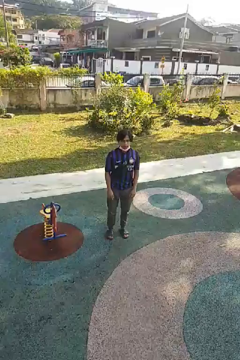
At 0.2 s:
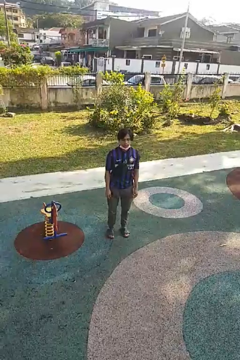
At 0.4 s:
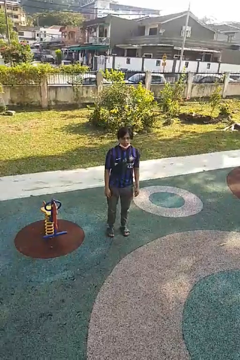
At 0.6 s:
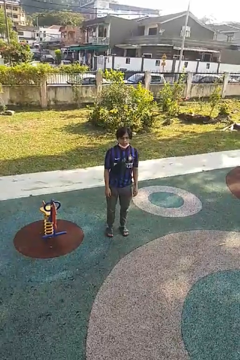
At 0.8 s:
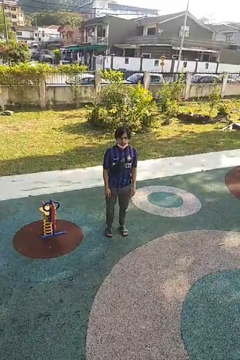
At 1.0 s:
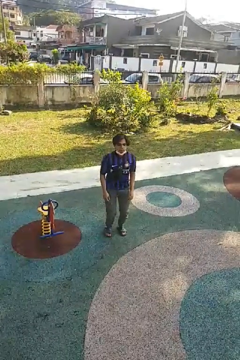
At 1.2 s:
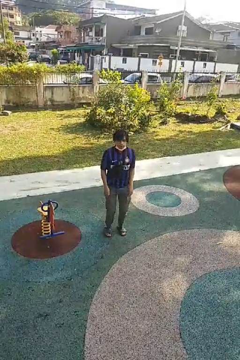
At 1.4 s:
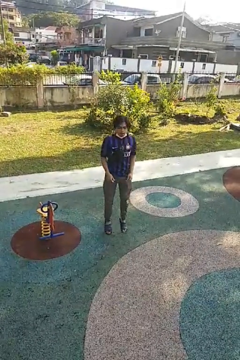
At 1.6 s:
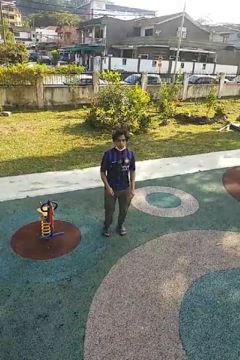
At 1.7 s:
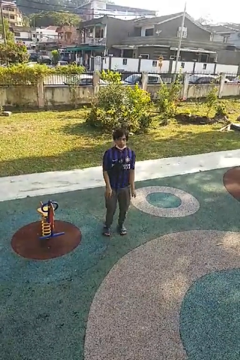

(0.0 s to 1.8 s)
person jumps

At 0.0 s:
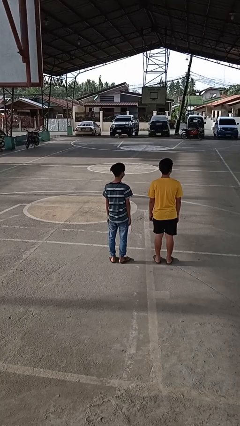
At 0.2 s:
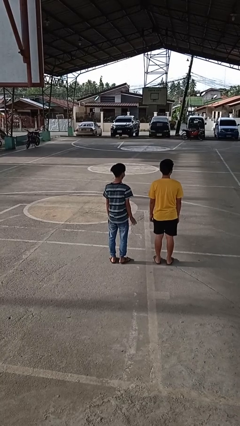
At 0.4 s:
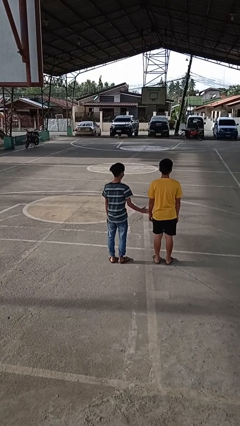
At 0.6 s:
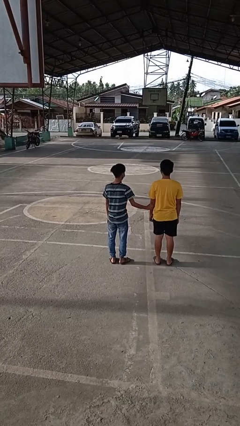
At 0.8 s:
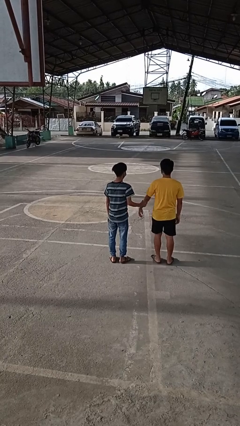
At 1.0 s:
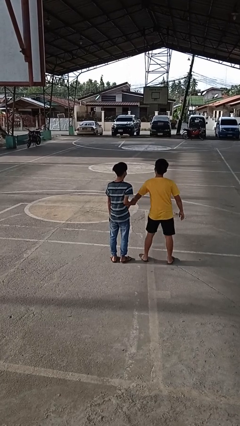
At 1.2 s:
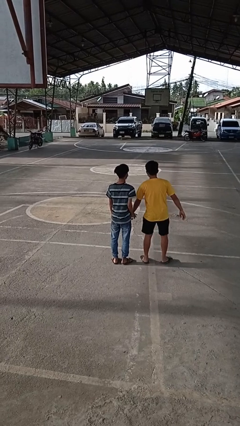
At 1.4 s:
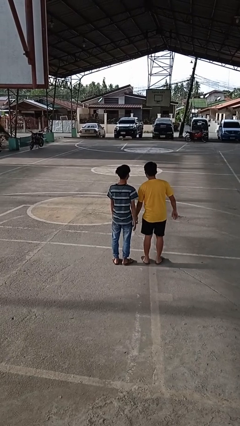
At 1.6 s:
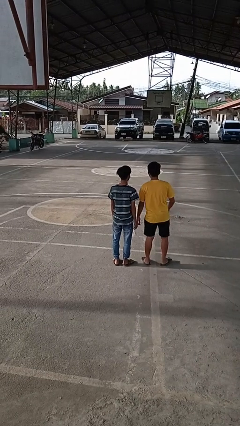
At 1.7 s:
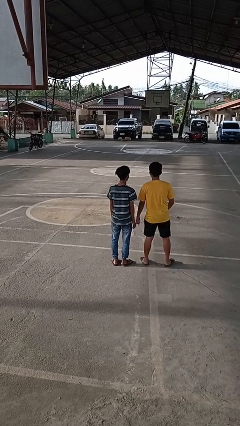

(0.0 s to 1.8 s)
person grabs person by forearm

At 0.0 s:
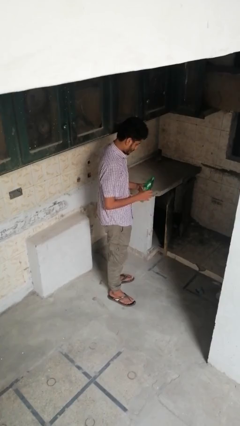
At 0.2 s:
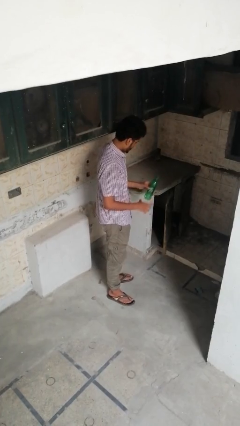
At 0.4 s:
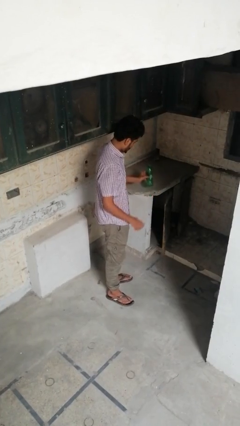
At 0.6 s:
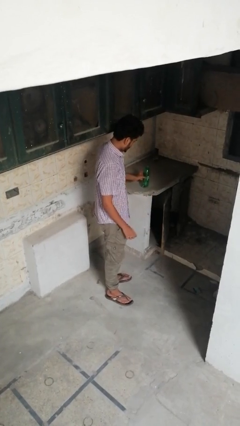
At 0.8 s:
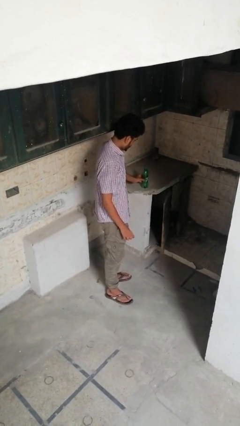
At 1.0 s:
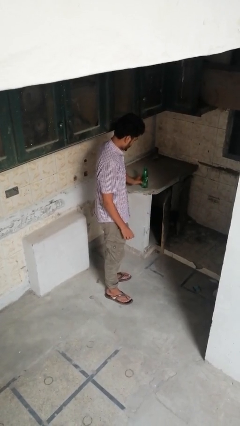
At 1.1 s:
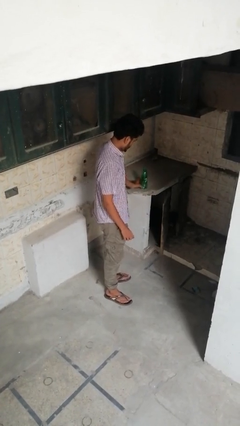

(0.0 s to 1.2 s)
person puts down object on countertop

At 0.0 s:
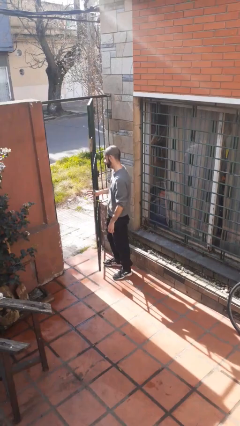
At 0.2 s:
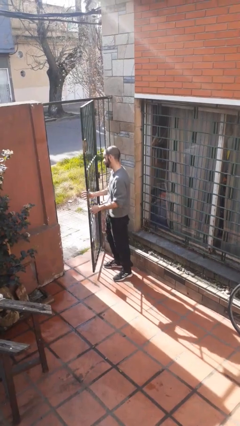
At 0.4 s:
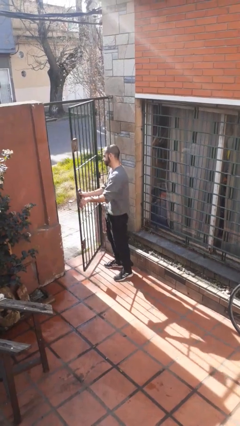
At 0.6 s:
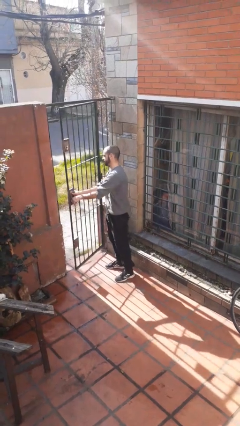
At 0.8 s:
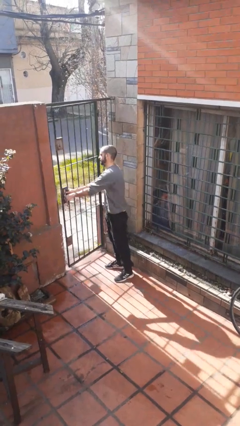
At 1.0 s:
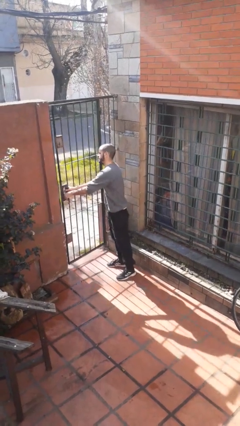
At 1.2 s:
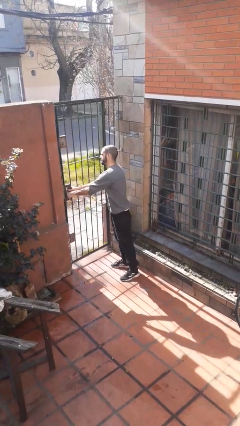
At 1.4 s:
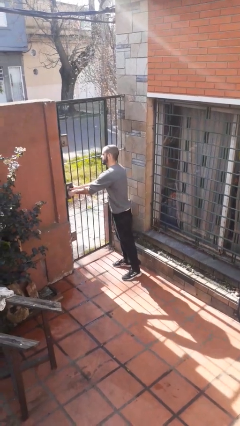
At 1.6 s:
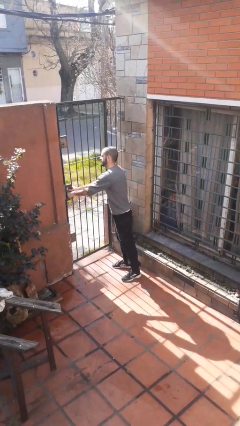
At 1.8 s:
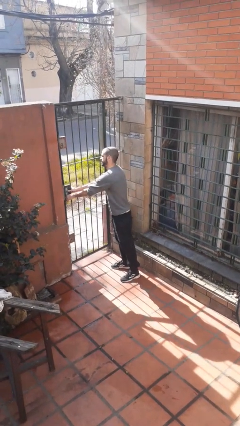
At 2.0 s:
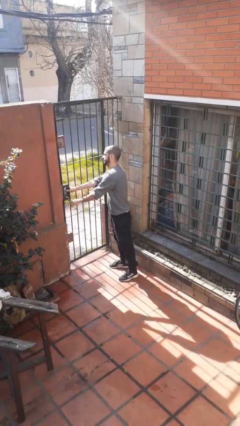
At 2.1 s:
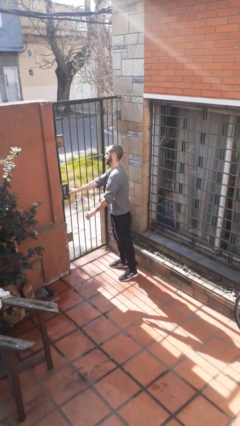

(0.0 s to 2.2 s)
person closes gate

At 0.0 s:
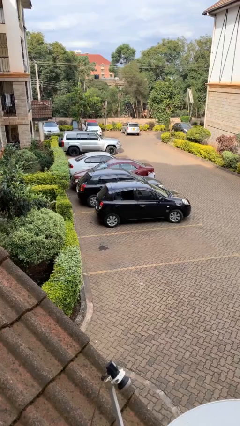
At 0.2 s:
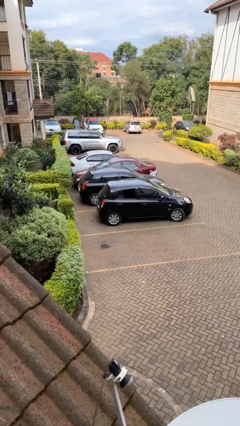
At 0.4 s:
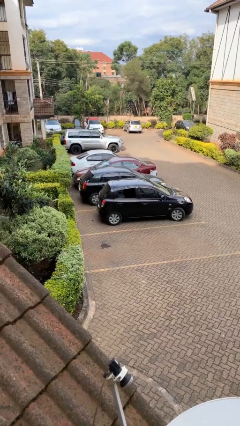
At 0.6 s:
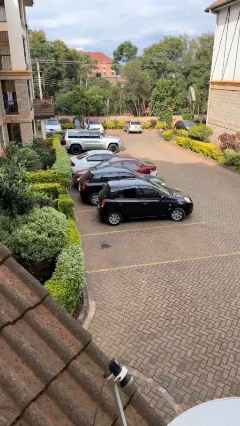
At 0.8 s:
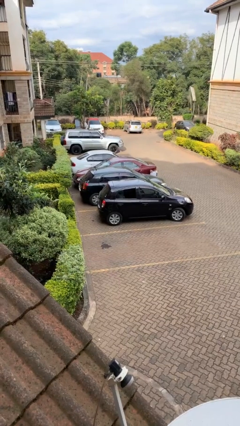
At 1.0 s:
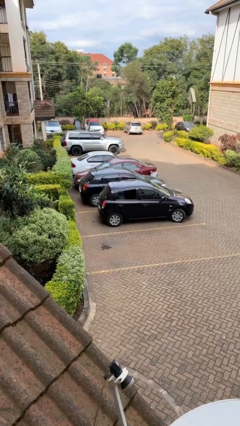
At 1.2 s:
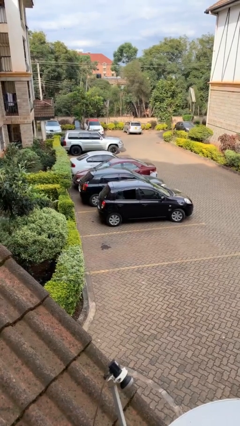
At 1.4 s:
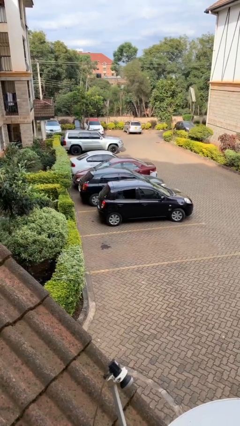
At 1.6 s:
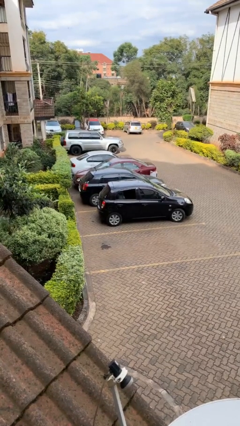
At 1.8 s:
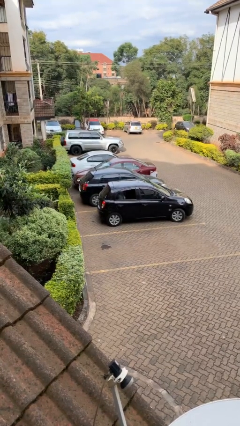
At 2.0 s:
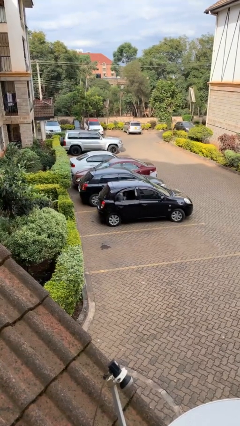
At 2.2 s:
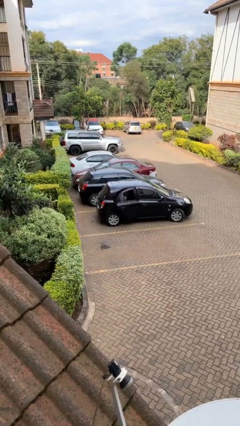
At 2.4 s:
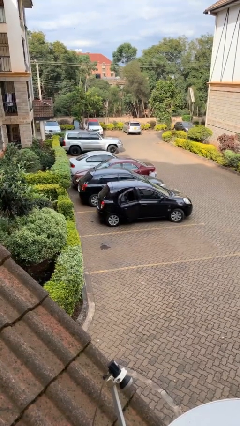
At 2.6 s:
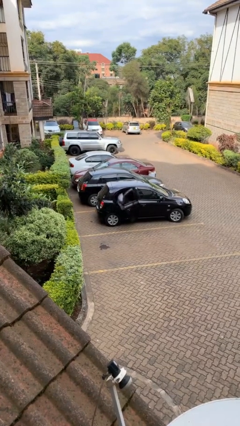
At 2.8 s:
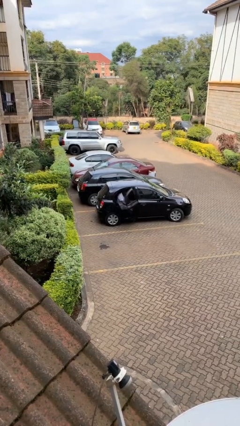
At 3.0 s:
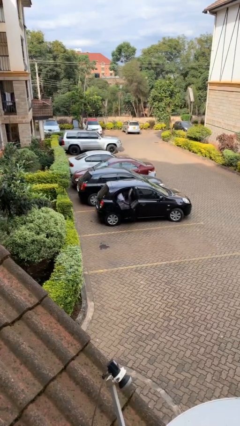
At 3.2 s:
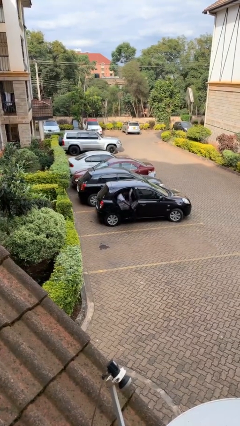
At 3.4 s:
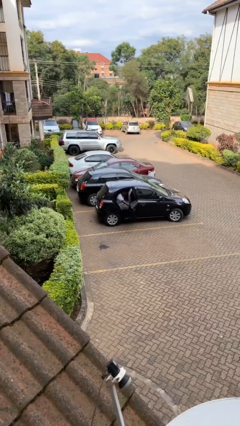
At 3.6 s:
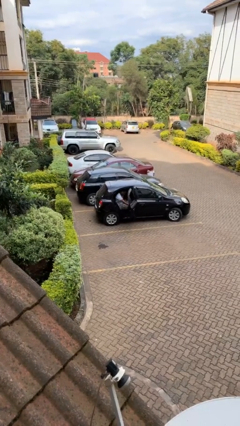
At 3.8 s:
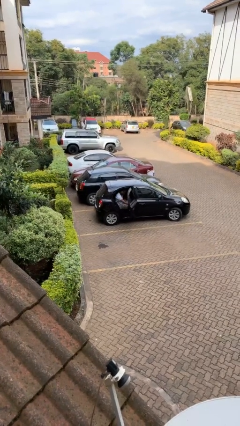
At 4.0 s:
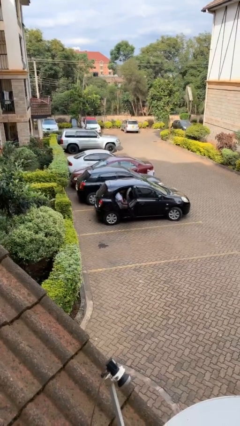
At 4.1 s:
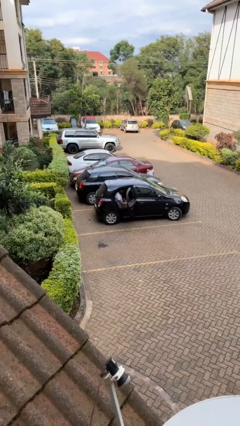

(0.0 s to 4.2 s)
person opens car door

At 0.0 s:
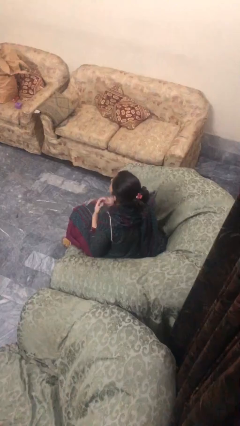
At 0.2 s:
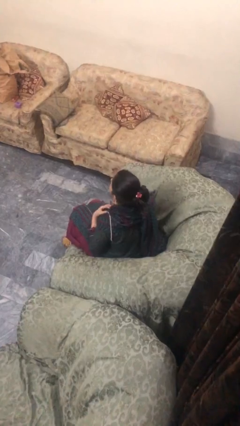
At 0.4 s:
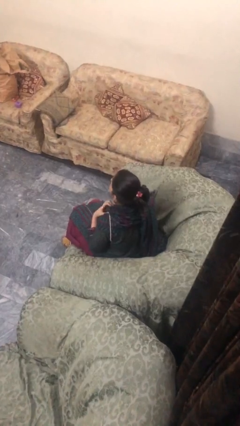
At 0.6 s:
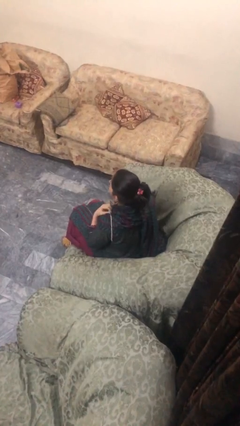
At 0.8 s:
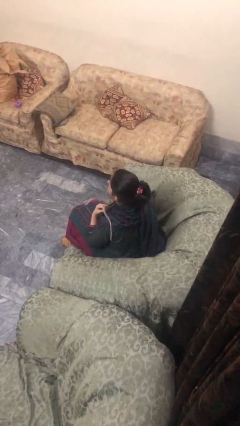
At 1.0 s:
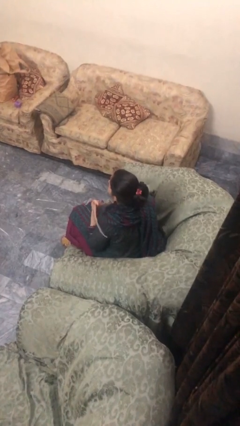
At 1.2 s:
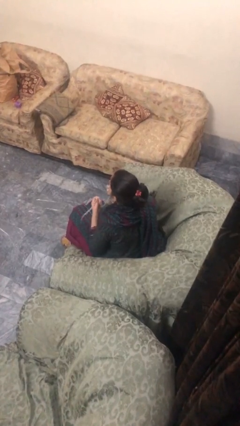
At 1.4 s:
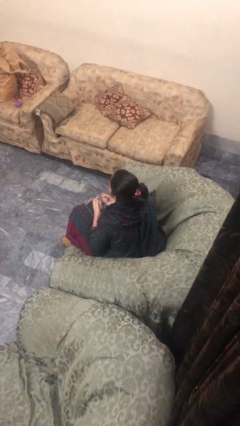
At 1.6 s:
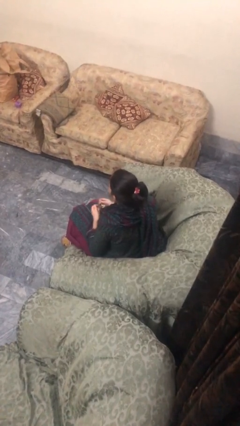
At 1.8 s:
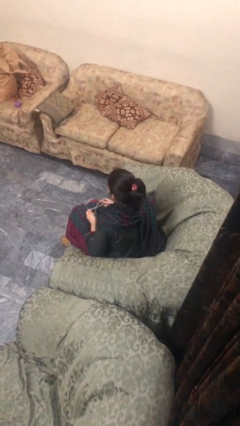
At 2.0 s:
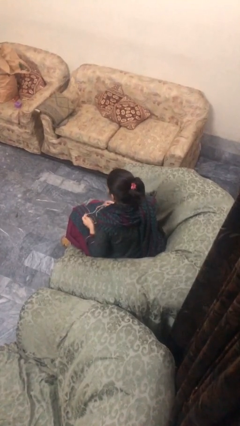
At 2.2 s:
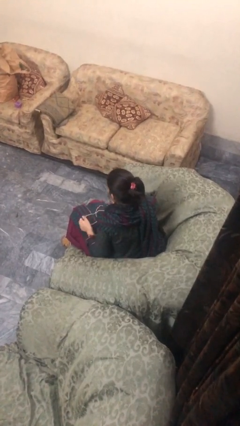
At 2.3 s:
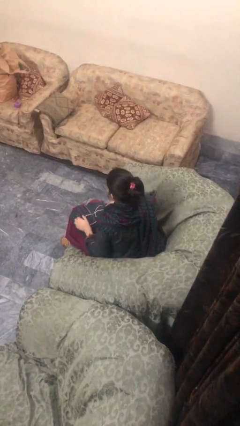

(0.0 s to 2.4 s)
person takes off necklace

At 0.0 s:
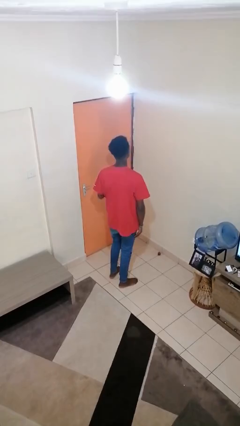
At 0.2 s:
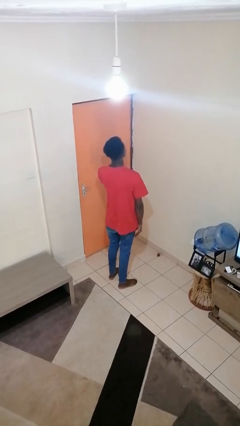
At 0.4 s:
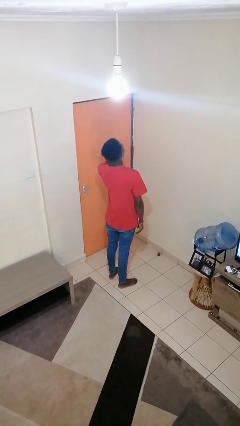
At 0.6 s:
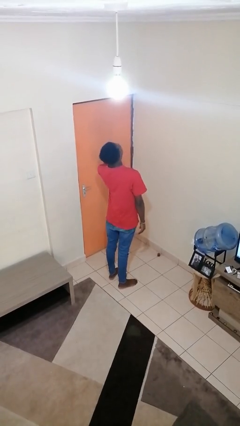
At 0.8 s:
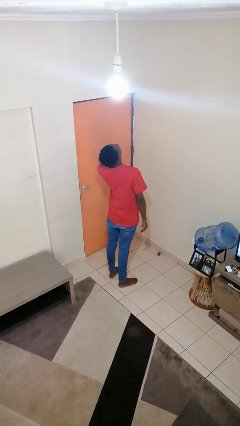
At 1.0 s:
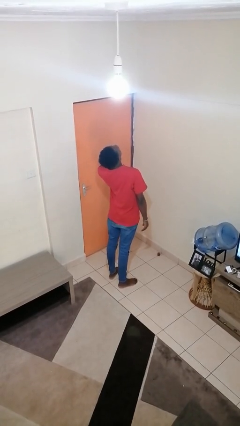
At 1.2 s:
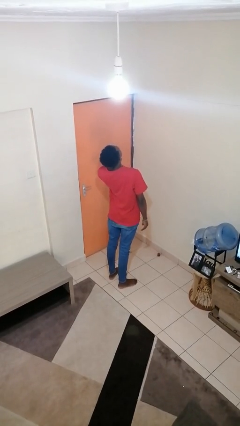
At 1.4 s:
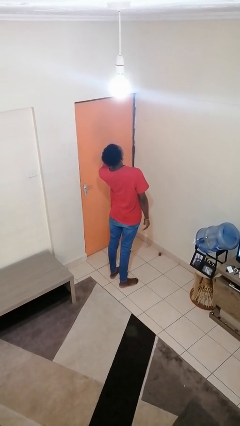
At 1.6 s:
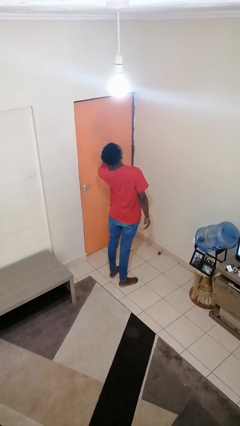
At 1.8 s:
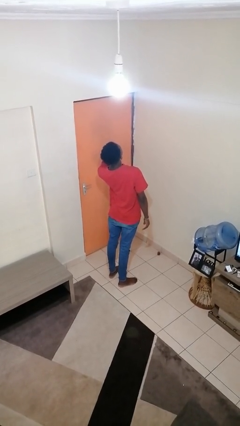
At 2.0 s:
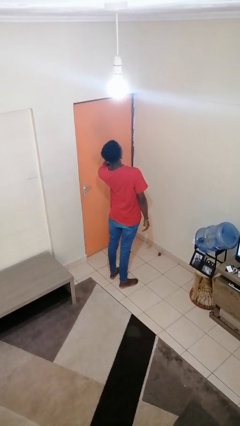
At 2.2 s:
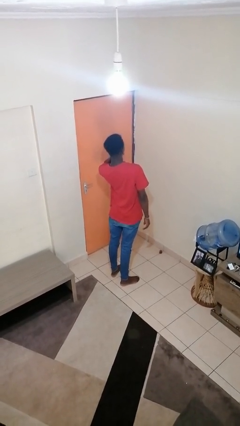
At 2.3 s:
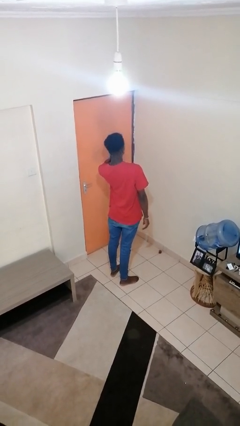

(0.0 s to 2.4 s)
person yawns

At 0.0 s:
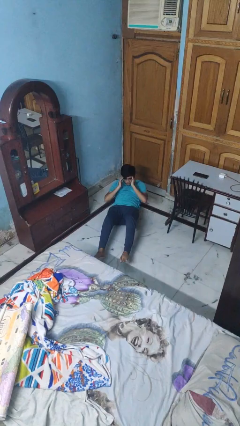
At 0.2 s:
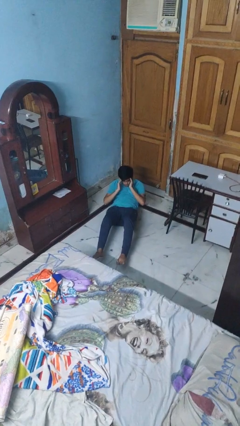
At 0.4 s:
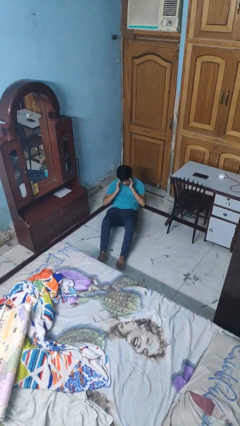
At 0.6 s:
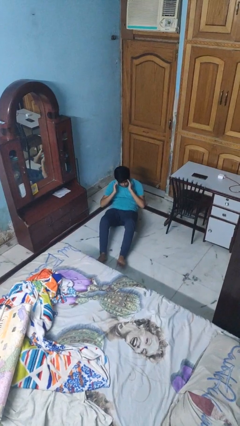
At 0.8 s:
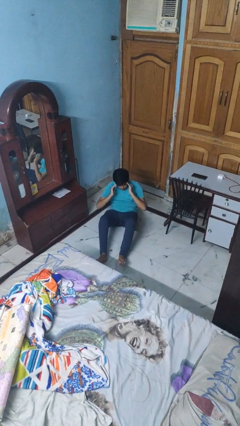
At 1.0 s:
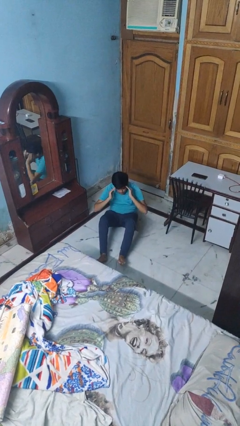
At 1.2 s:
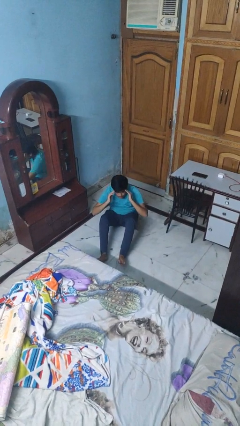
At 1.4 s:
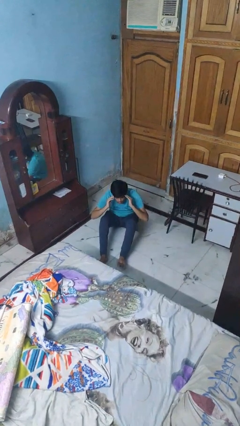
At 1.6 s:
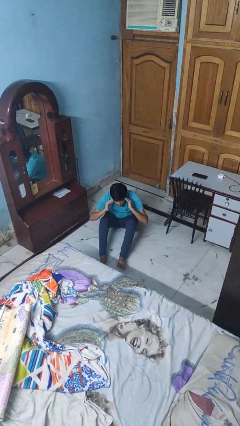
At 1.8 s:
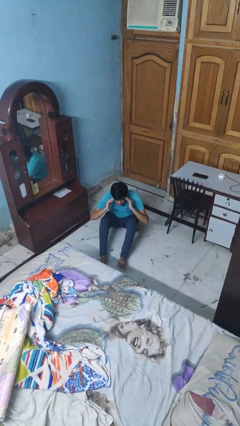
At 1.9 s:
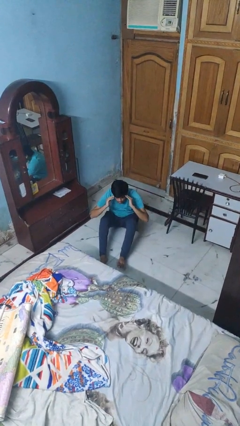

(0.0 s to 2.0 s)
person exercises with situp
